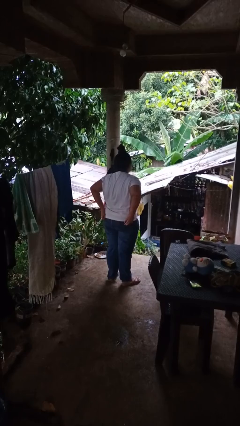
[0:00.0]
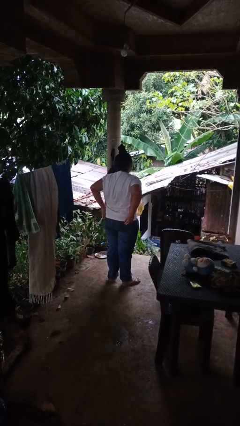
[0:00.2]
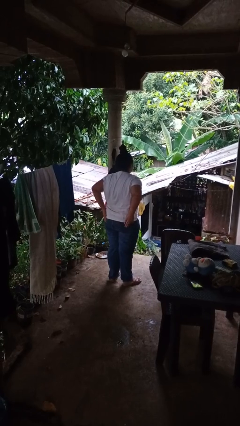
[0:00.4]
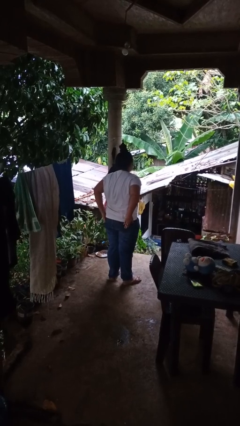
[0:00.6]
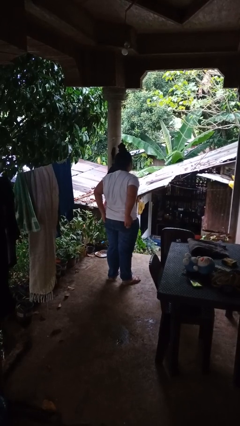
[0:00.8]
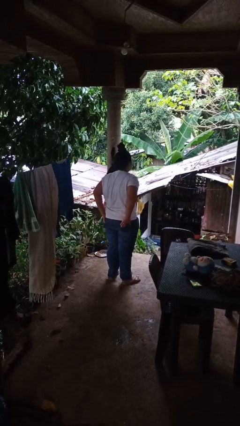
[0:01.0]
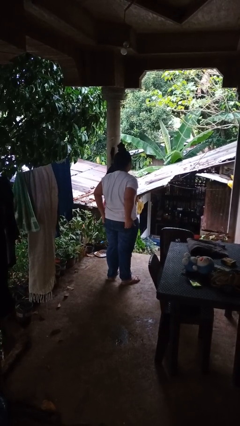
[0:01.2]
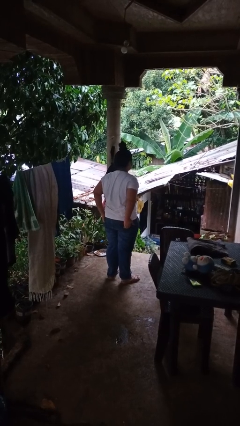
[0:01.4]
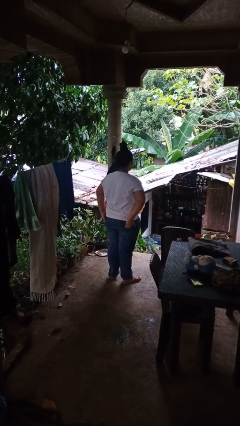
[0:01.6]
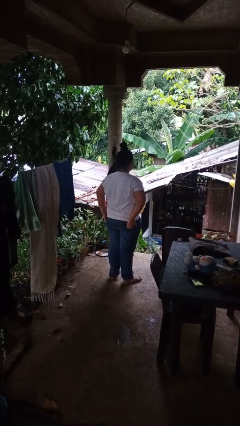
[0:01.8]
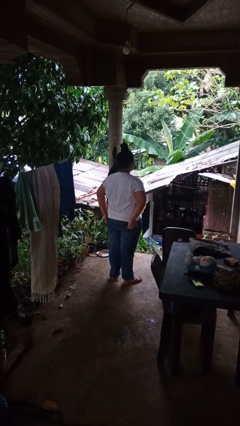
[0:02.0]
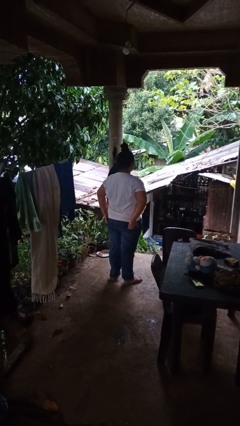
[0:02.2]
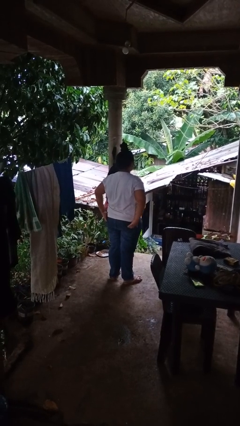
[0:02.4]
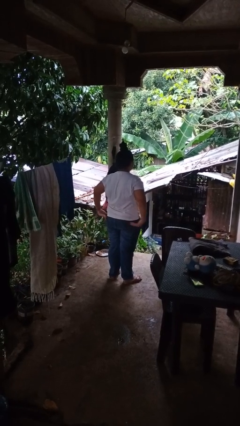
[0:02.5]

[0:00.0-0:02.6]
person puts hands in back pockets

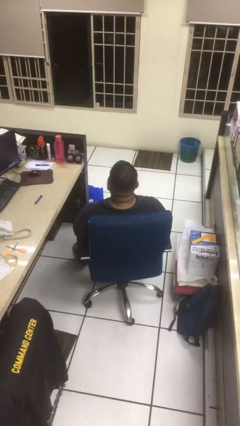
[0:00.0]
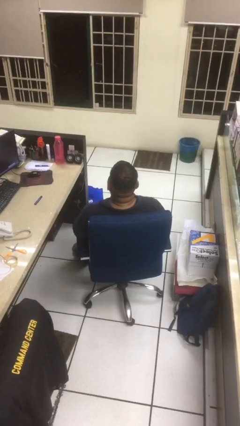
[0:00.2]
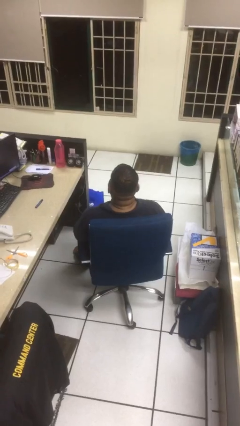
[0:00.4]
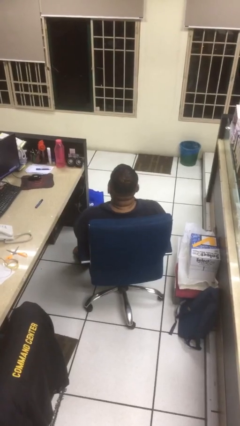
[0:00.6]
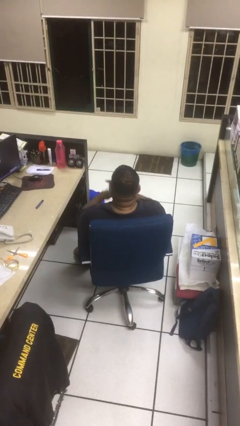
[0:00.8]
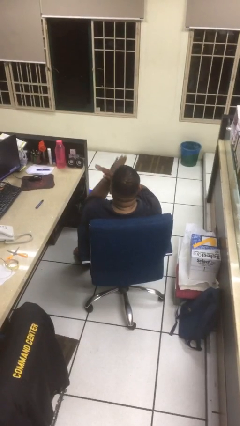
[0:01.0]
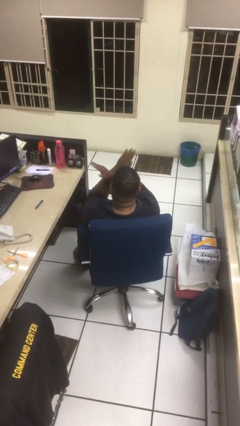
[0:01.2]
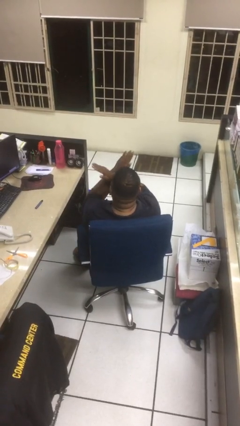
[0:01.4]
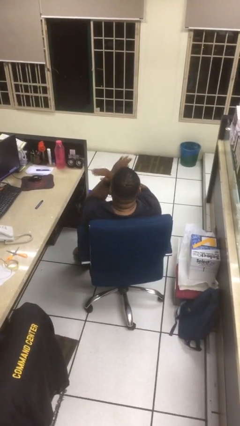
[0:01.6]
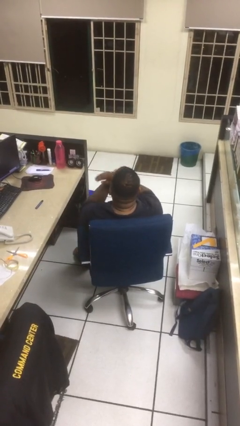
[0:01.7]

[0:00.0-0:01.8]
person gestures arms x

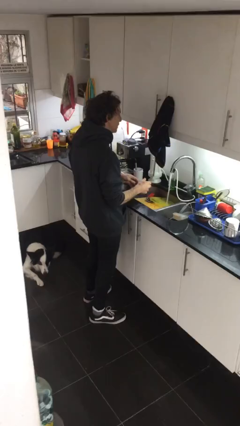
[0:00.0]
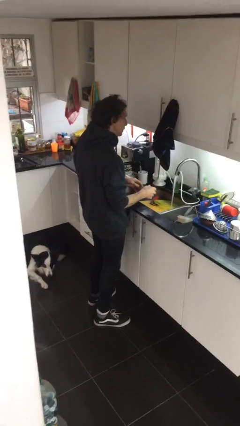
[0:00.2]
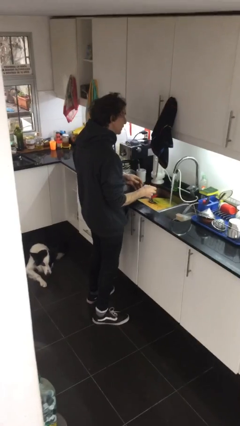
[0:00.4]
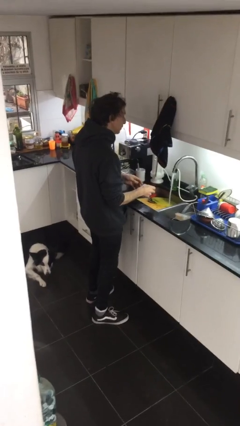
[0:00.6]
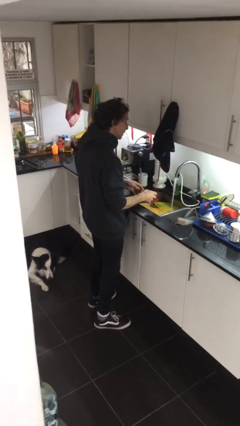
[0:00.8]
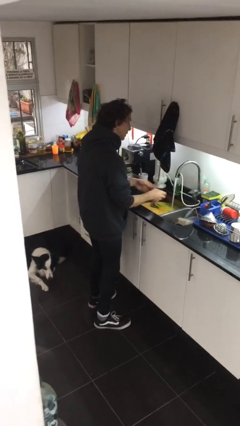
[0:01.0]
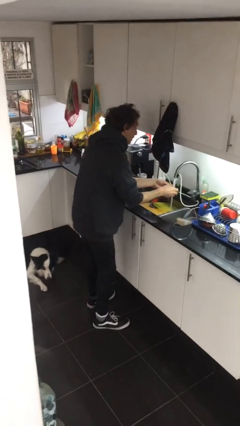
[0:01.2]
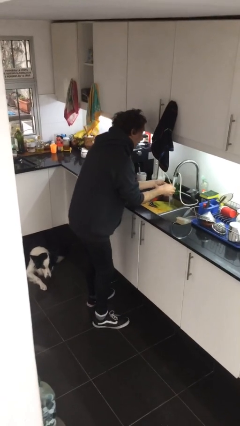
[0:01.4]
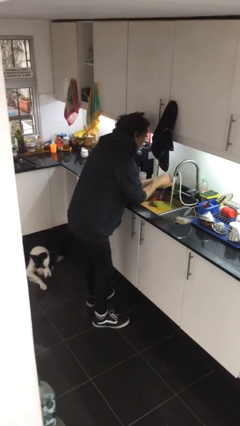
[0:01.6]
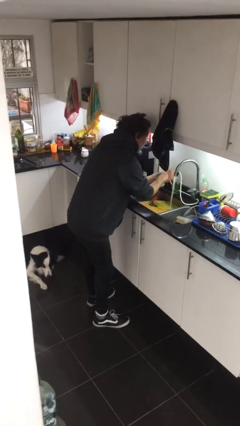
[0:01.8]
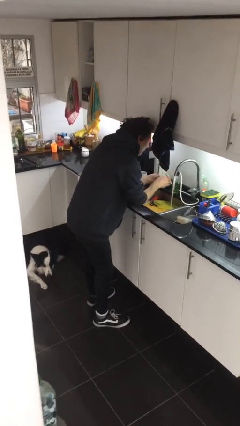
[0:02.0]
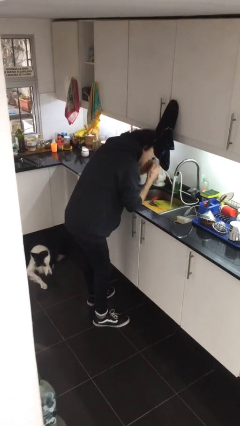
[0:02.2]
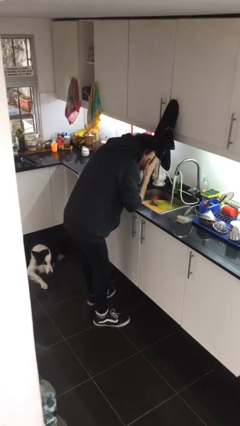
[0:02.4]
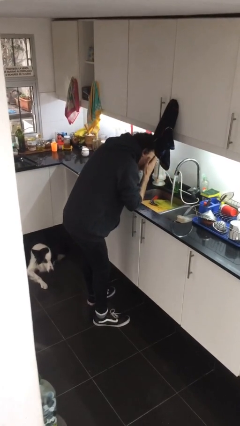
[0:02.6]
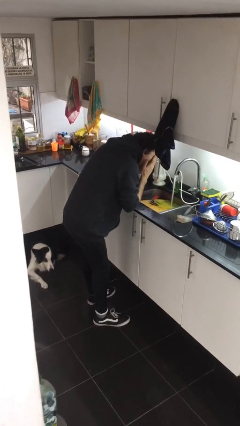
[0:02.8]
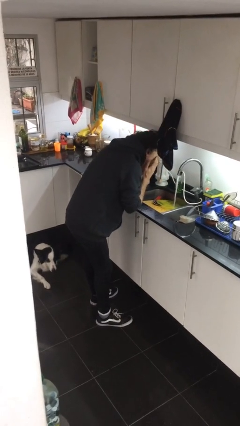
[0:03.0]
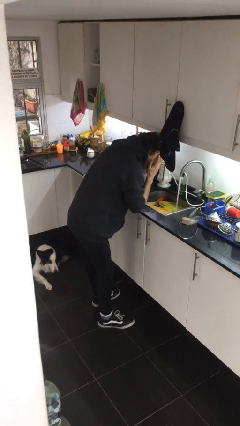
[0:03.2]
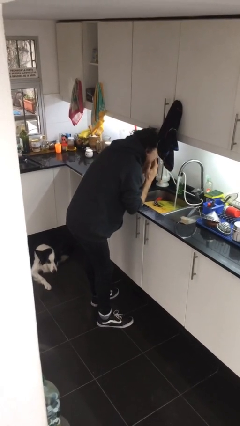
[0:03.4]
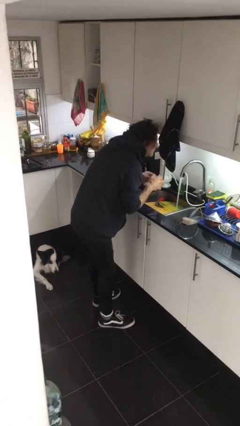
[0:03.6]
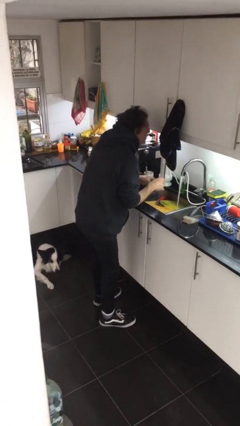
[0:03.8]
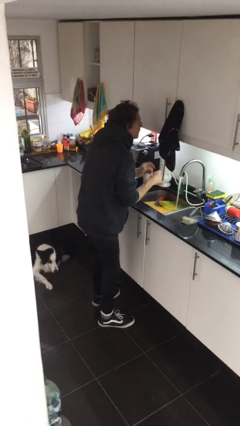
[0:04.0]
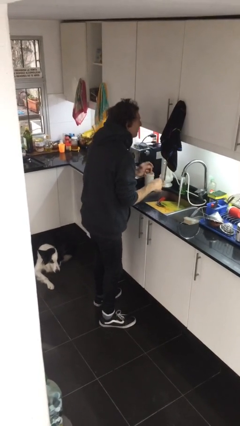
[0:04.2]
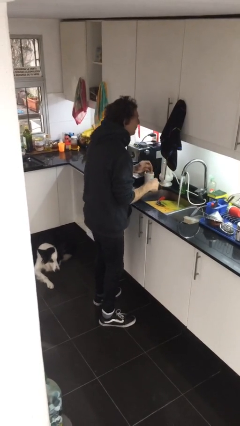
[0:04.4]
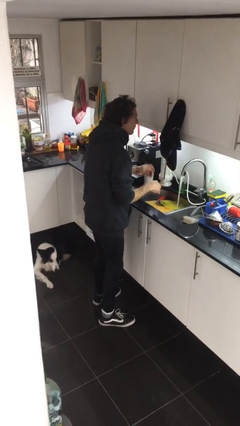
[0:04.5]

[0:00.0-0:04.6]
person washes face

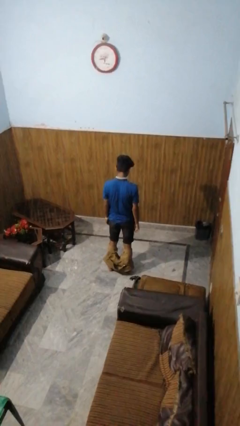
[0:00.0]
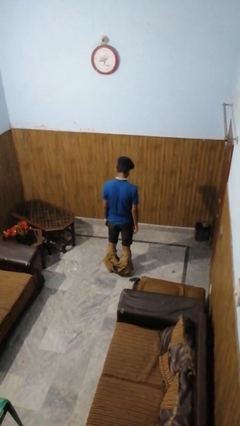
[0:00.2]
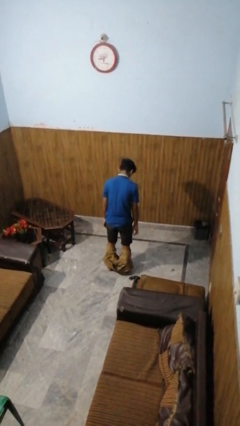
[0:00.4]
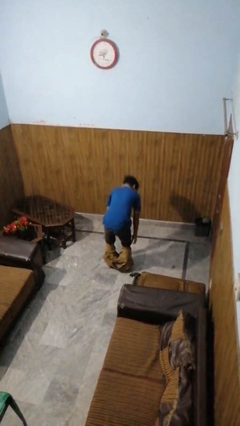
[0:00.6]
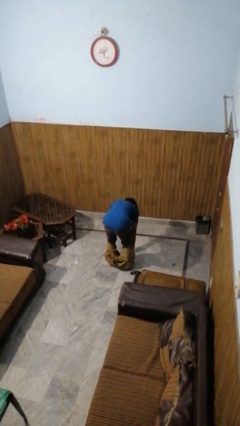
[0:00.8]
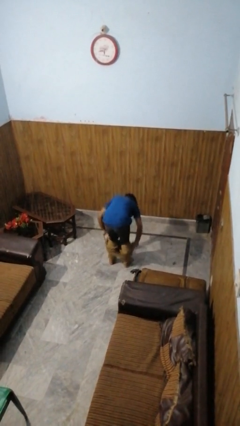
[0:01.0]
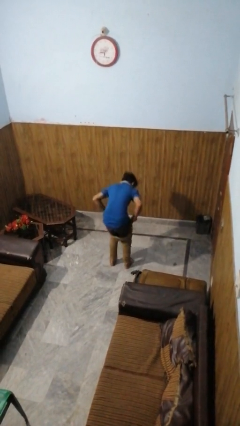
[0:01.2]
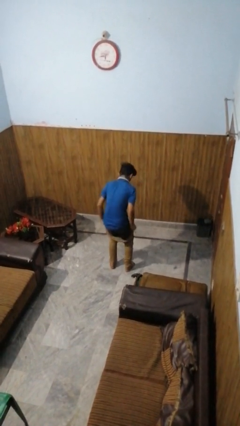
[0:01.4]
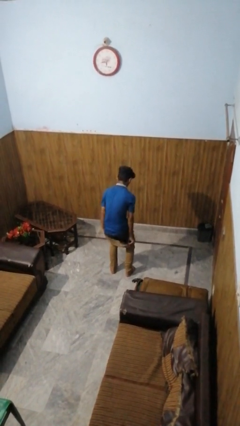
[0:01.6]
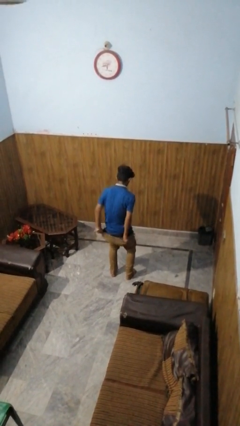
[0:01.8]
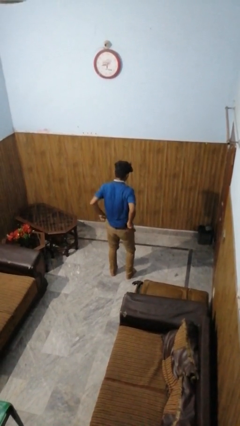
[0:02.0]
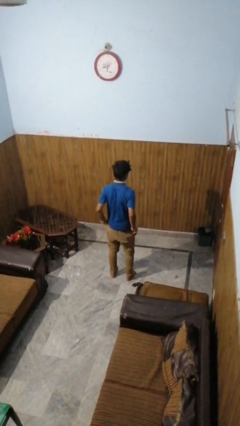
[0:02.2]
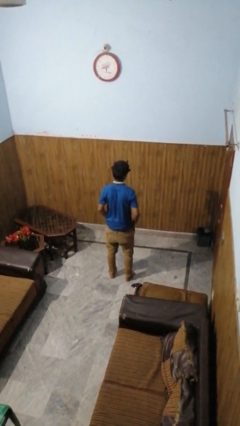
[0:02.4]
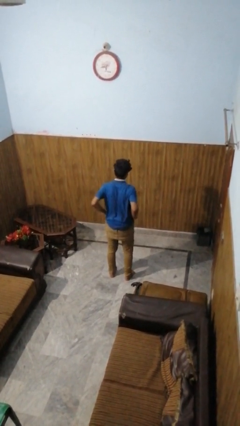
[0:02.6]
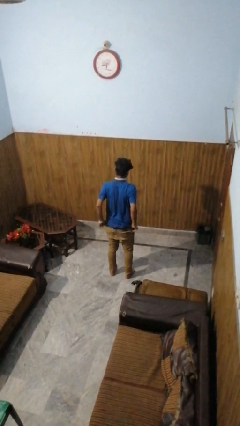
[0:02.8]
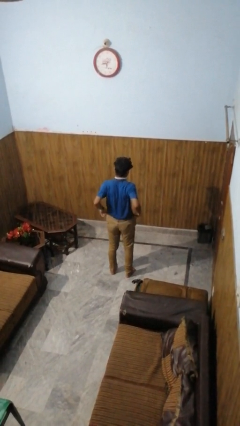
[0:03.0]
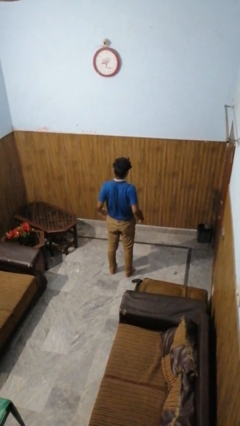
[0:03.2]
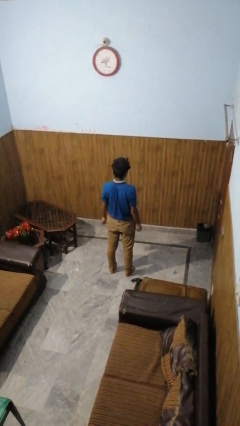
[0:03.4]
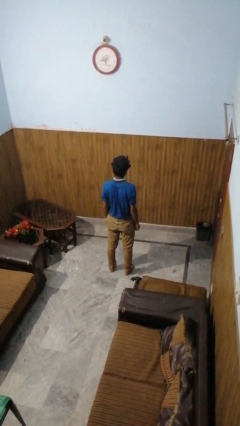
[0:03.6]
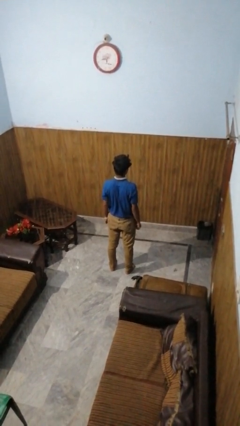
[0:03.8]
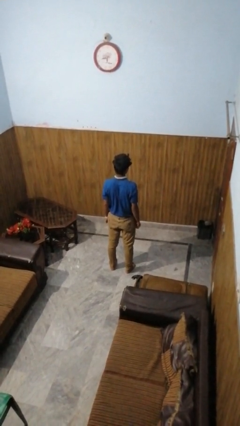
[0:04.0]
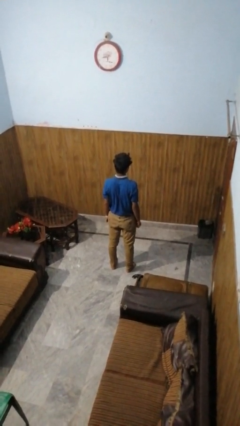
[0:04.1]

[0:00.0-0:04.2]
person puts on pants

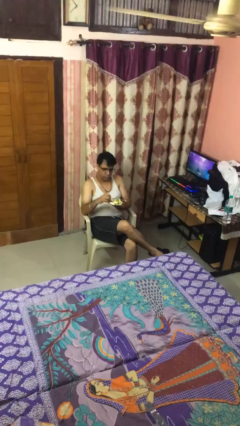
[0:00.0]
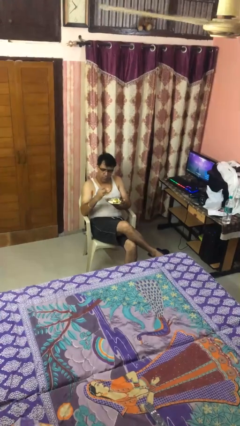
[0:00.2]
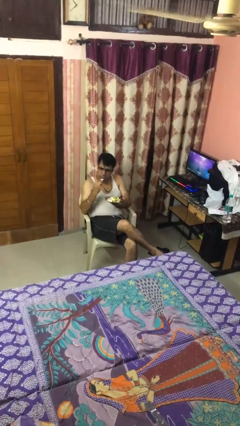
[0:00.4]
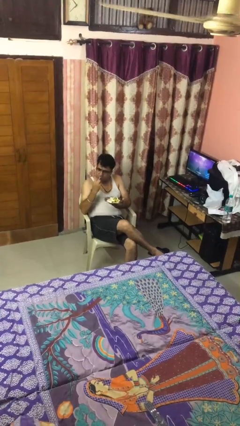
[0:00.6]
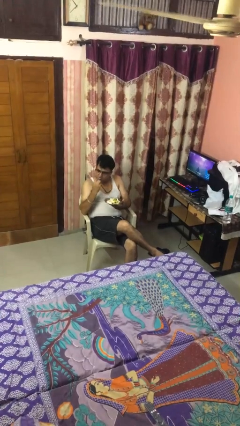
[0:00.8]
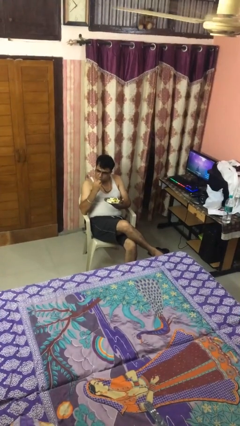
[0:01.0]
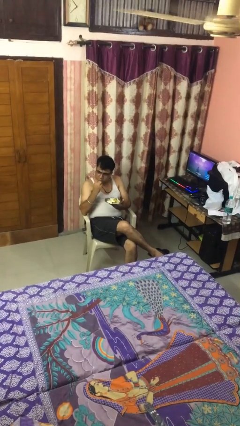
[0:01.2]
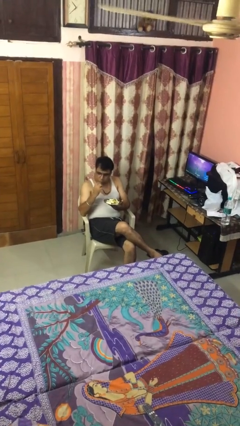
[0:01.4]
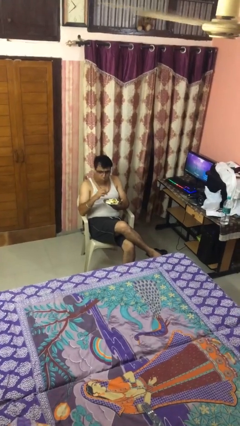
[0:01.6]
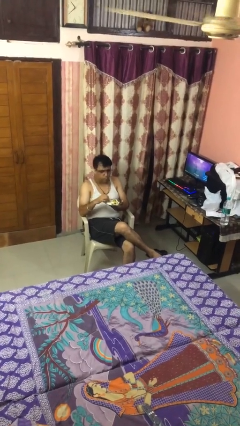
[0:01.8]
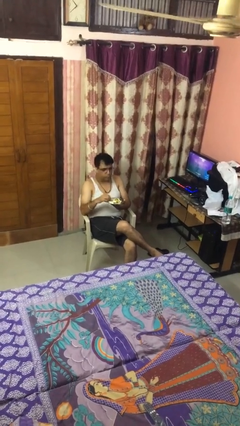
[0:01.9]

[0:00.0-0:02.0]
person eats with hands

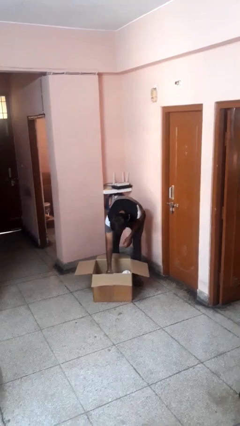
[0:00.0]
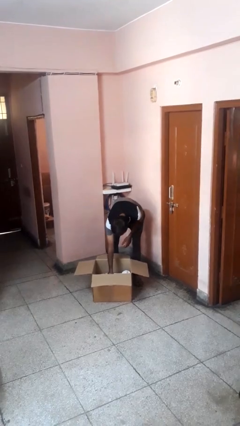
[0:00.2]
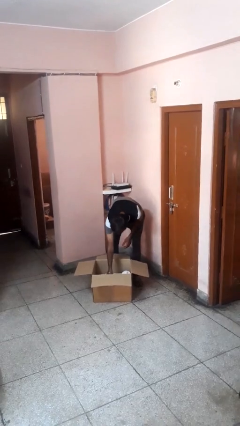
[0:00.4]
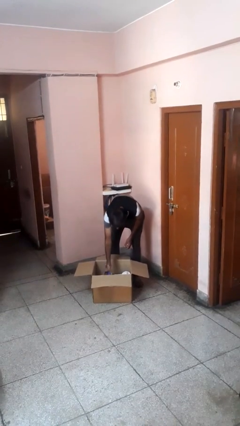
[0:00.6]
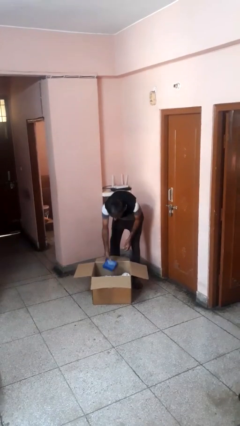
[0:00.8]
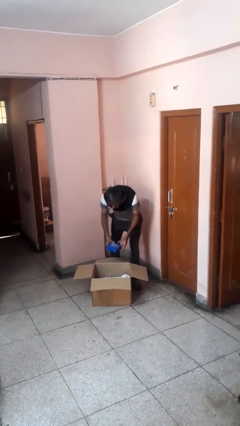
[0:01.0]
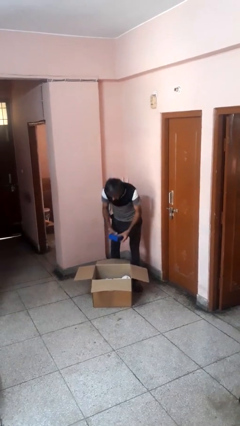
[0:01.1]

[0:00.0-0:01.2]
person takes object from box

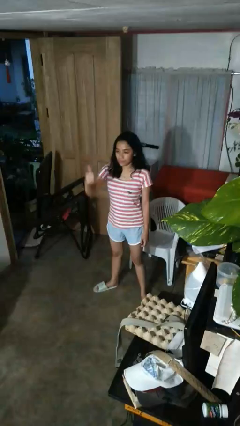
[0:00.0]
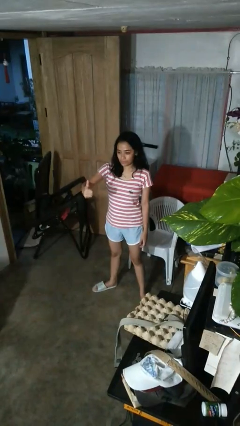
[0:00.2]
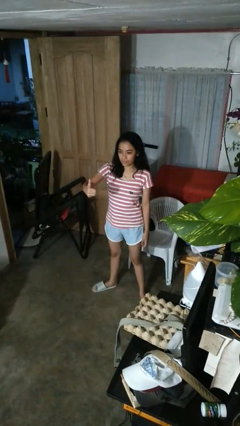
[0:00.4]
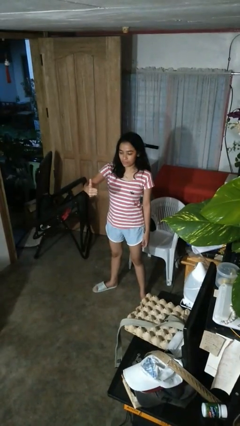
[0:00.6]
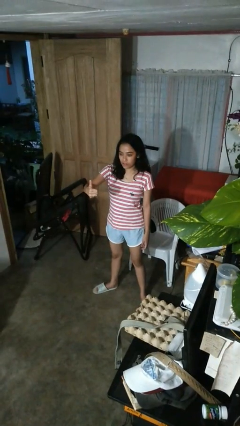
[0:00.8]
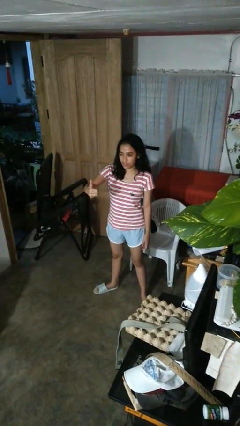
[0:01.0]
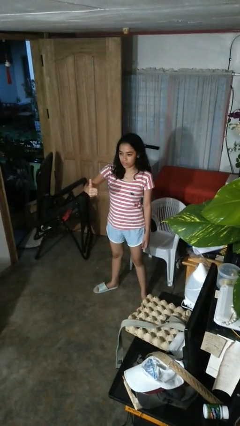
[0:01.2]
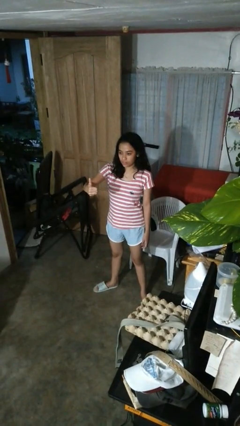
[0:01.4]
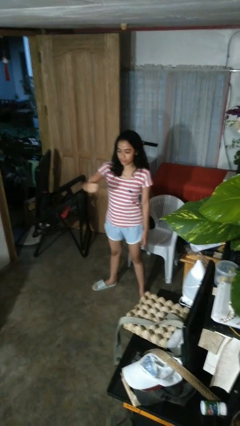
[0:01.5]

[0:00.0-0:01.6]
person gestures thumbs up
